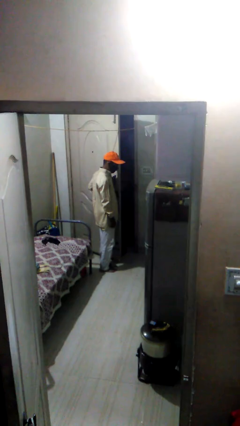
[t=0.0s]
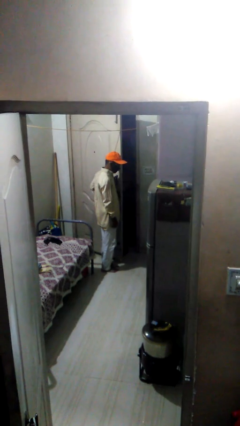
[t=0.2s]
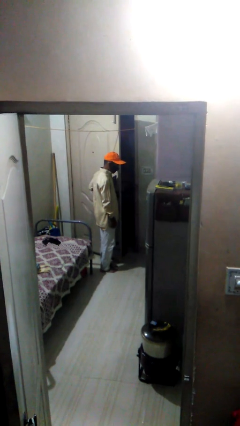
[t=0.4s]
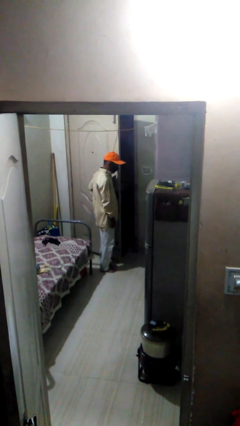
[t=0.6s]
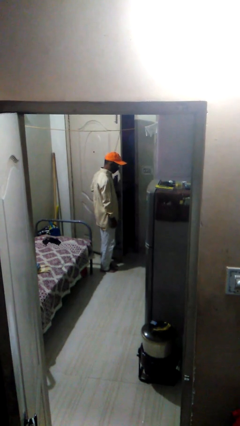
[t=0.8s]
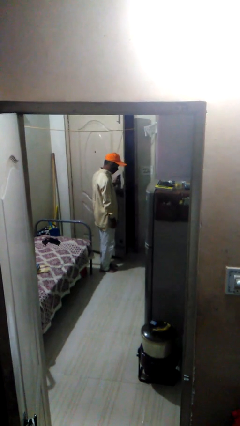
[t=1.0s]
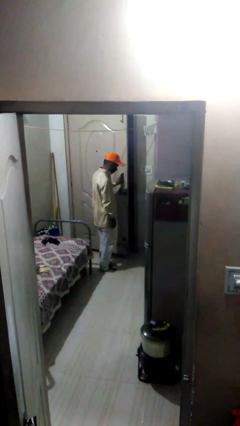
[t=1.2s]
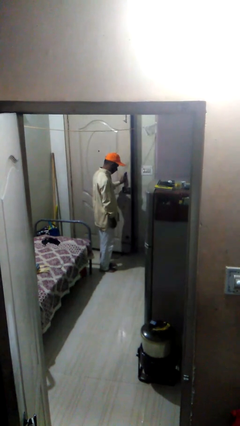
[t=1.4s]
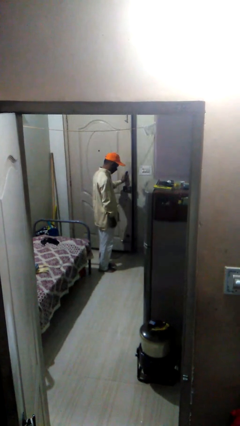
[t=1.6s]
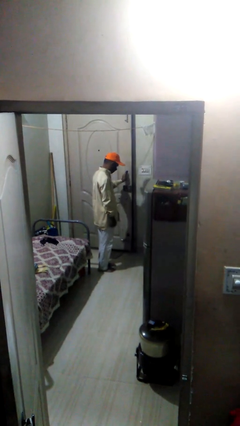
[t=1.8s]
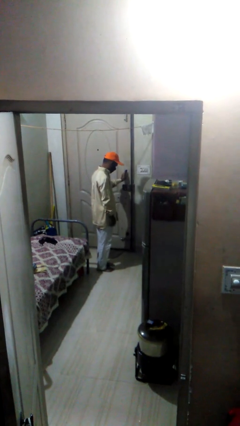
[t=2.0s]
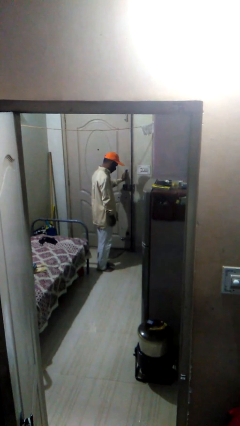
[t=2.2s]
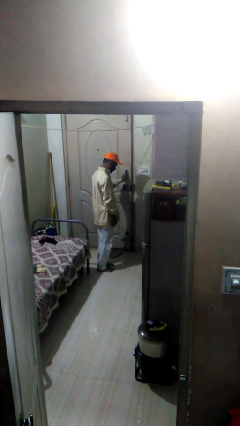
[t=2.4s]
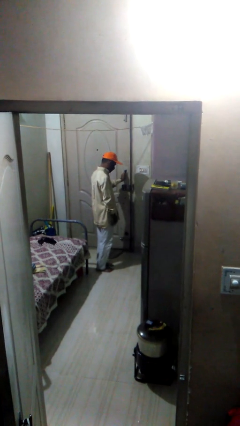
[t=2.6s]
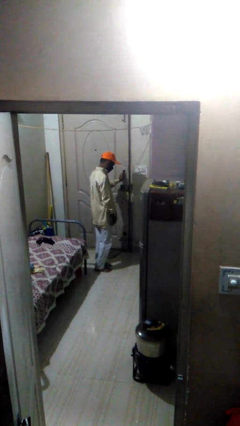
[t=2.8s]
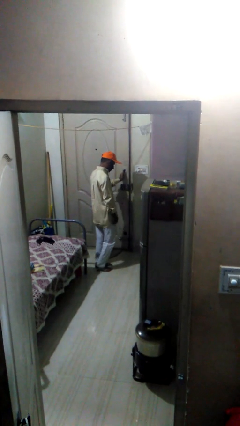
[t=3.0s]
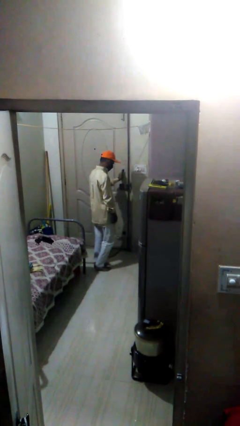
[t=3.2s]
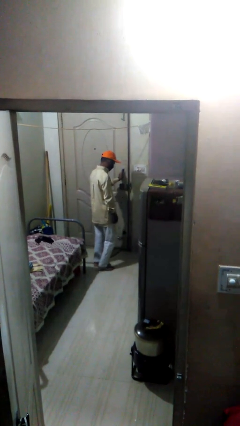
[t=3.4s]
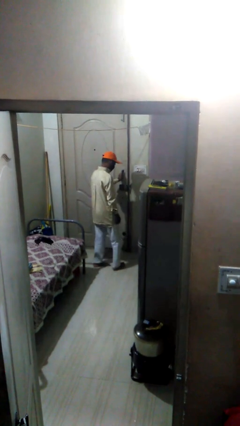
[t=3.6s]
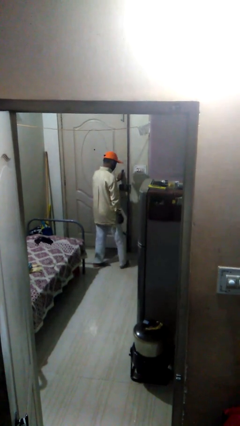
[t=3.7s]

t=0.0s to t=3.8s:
person closes facility door

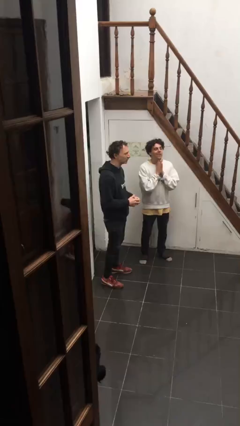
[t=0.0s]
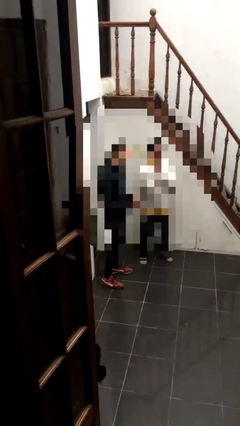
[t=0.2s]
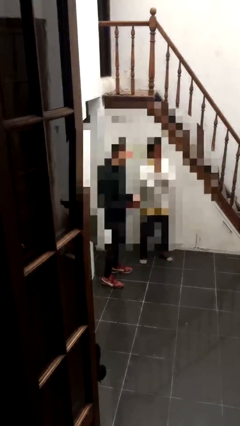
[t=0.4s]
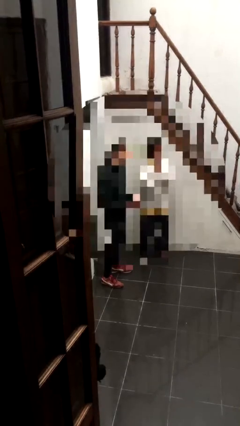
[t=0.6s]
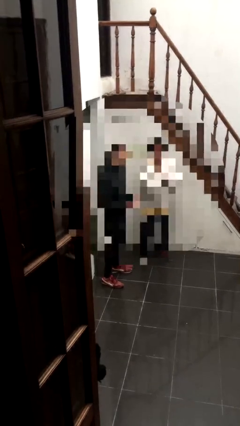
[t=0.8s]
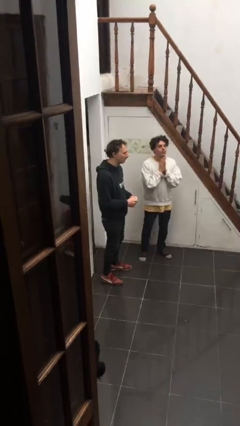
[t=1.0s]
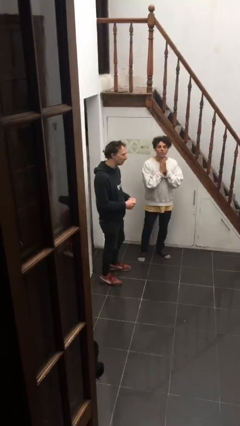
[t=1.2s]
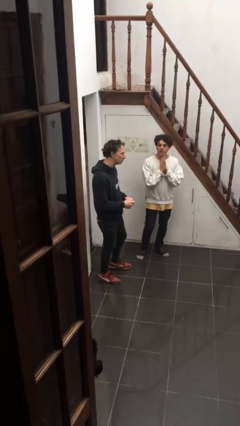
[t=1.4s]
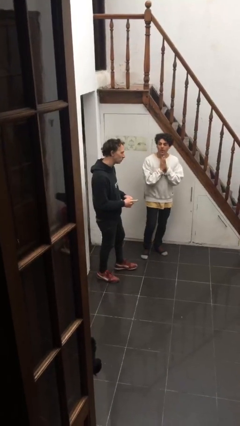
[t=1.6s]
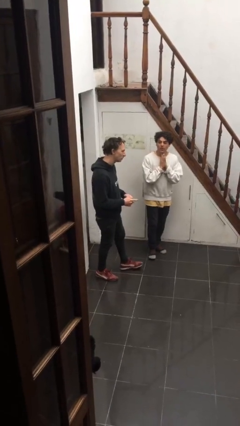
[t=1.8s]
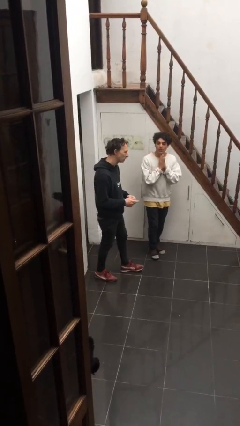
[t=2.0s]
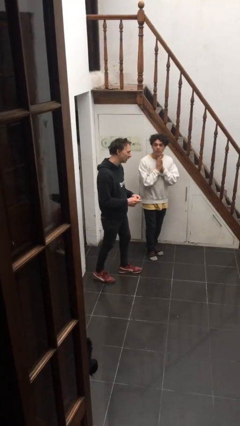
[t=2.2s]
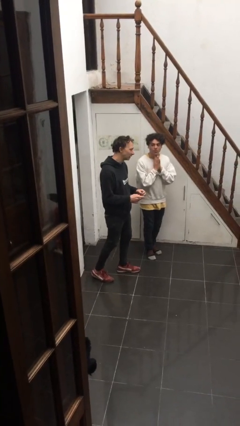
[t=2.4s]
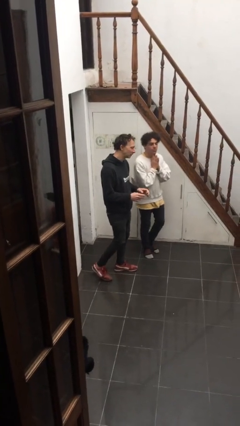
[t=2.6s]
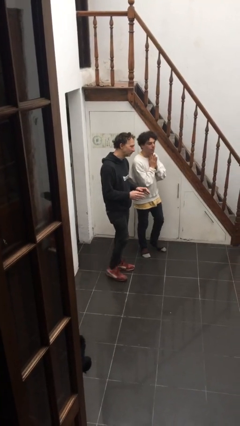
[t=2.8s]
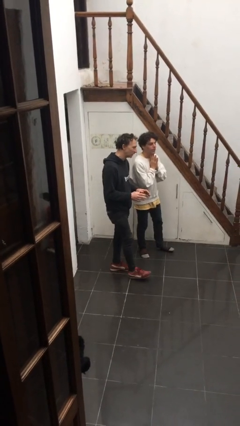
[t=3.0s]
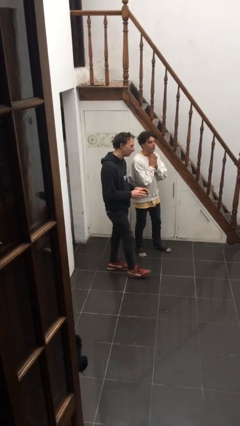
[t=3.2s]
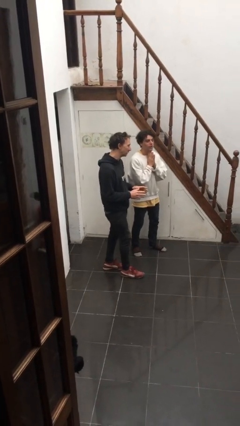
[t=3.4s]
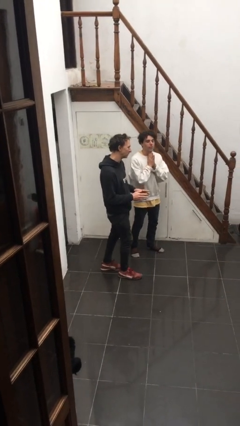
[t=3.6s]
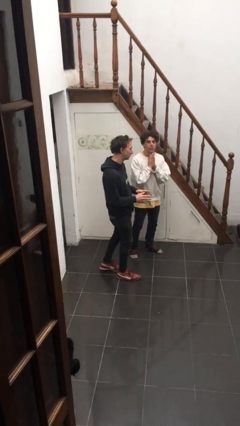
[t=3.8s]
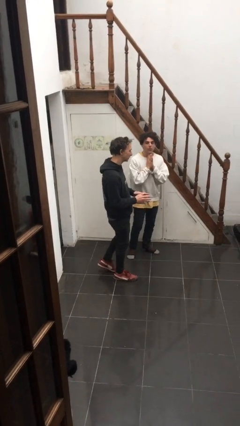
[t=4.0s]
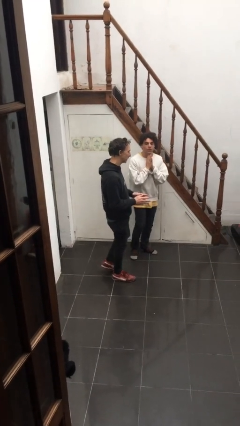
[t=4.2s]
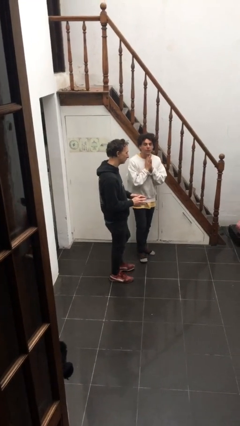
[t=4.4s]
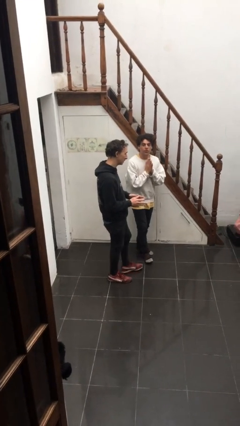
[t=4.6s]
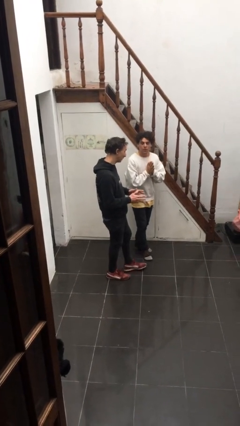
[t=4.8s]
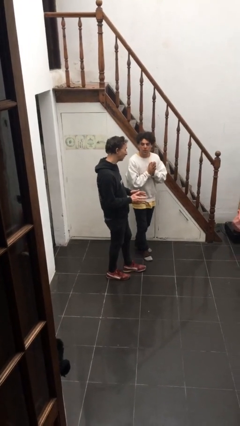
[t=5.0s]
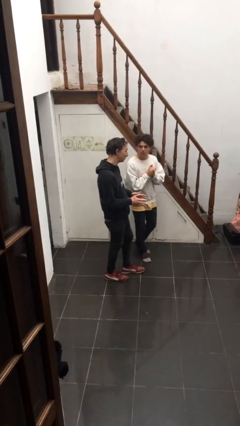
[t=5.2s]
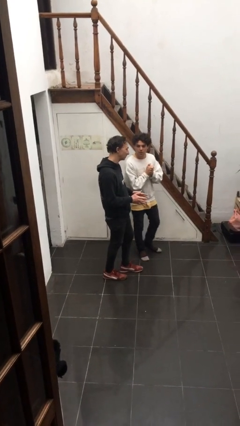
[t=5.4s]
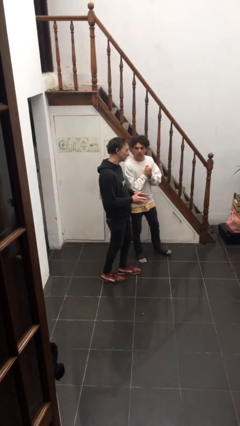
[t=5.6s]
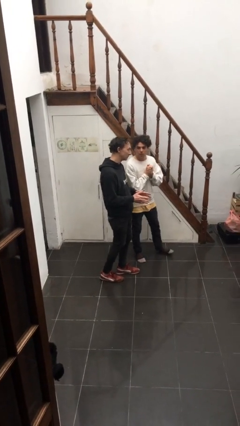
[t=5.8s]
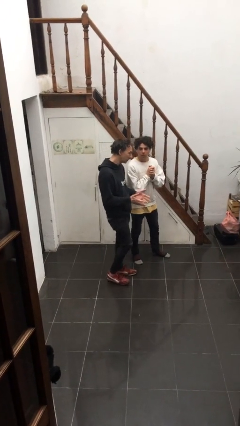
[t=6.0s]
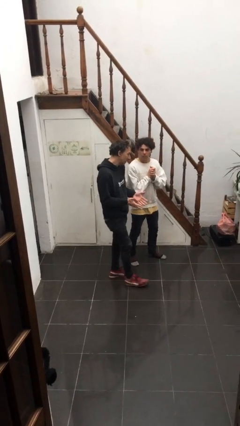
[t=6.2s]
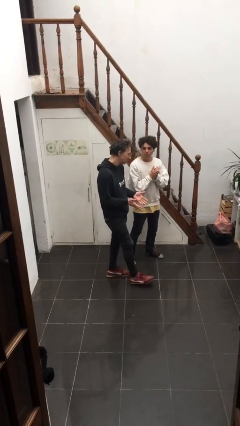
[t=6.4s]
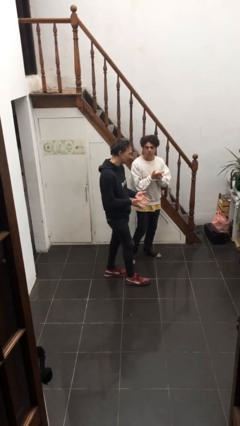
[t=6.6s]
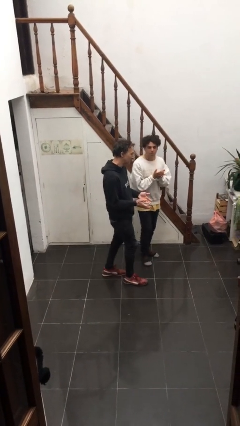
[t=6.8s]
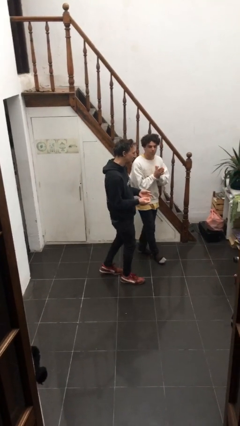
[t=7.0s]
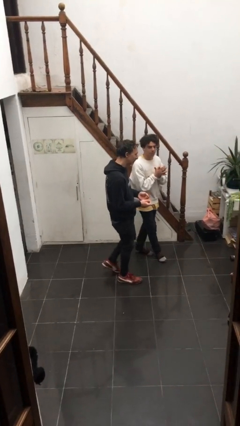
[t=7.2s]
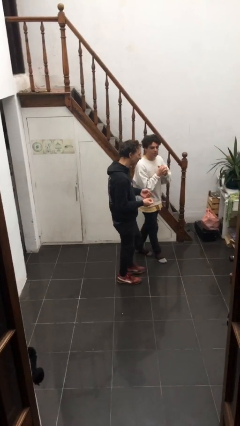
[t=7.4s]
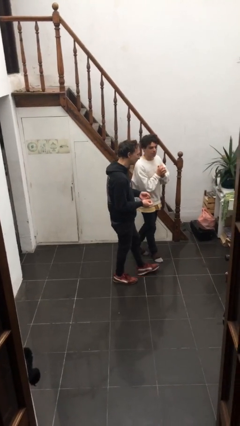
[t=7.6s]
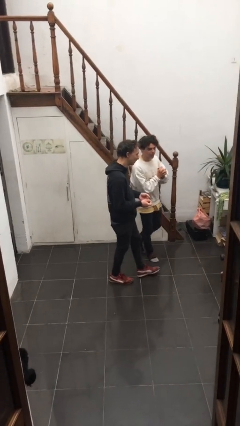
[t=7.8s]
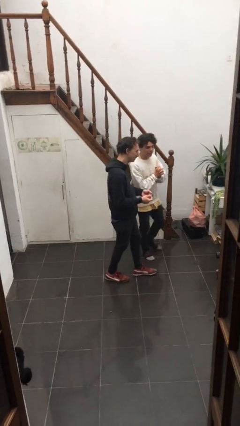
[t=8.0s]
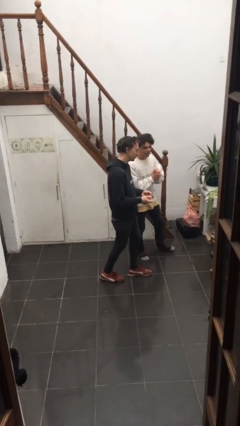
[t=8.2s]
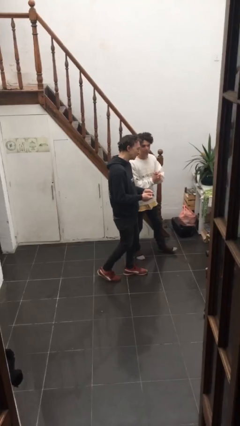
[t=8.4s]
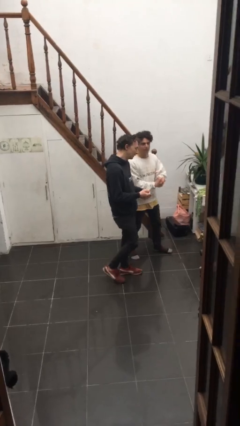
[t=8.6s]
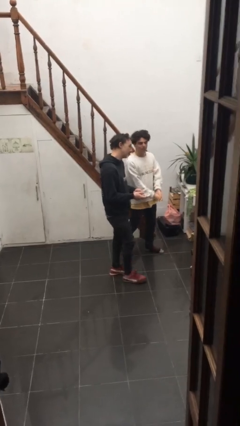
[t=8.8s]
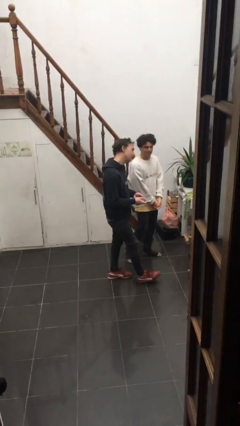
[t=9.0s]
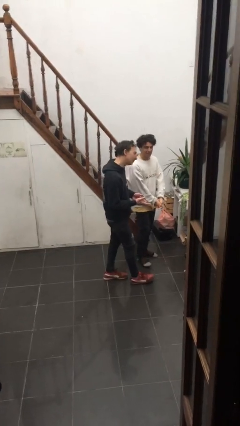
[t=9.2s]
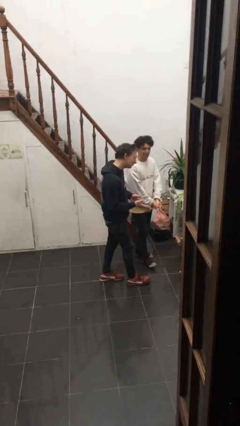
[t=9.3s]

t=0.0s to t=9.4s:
person talks to person

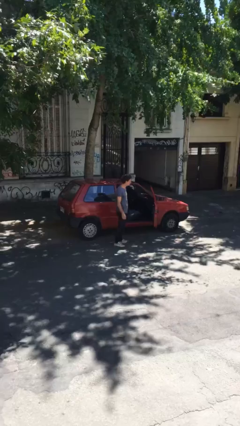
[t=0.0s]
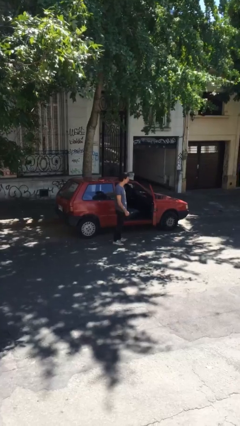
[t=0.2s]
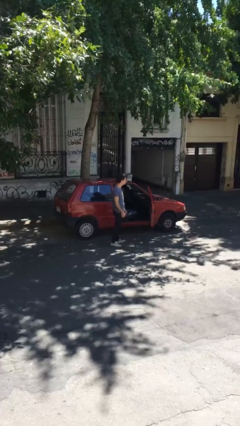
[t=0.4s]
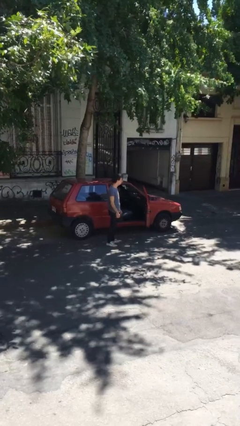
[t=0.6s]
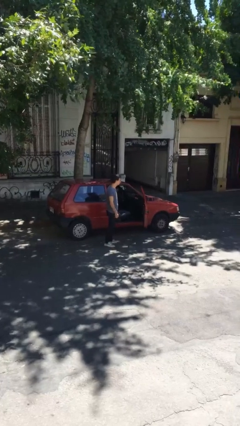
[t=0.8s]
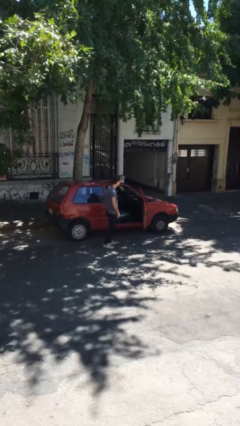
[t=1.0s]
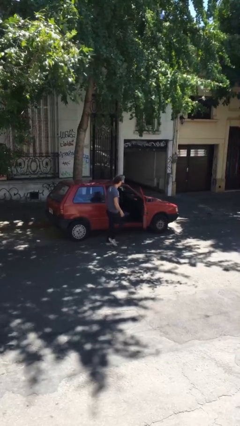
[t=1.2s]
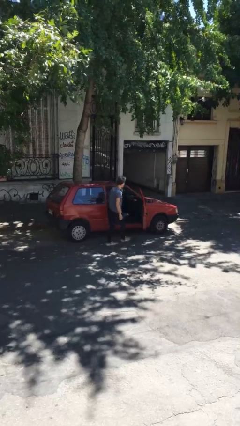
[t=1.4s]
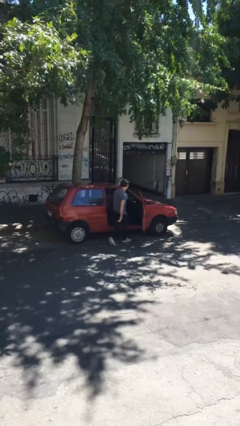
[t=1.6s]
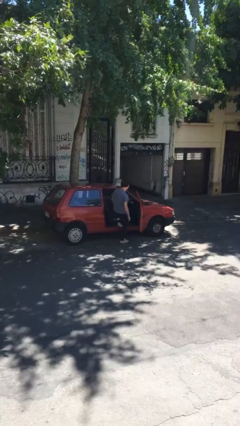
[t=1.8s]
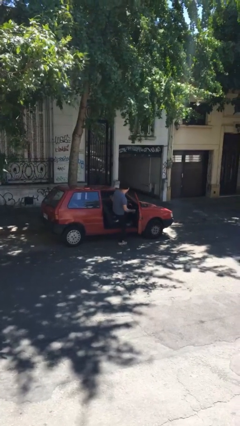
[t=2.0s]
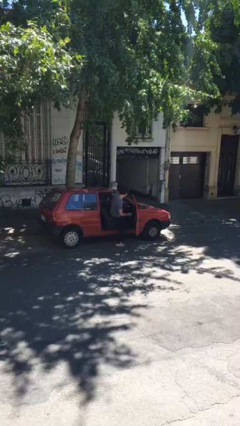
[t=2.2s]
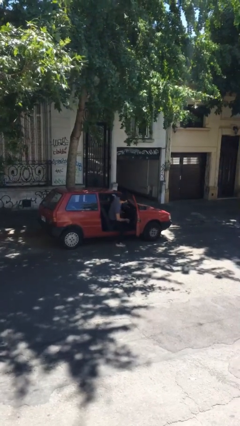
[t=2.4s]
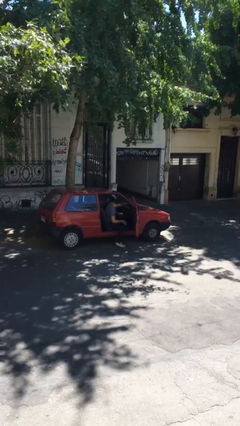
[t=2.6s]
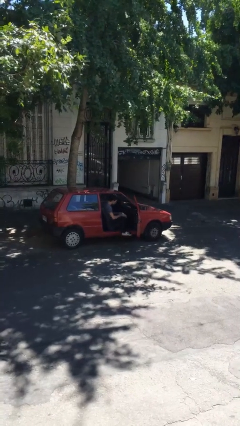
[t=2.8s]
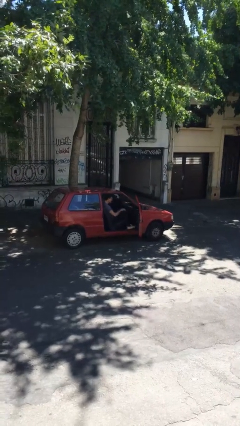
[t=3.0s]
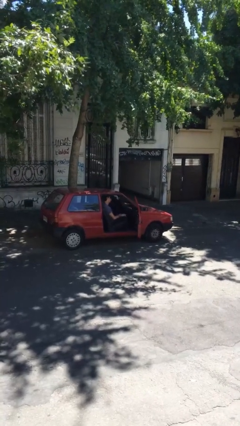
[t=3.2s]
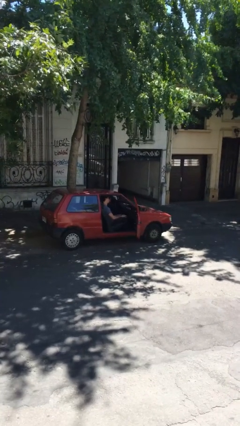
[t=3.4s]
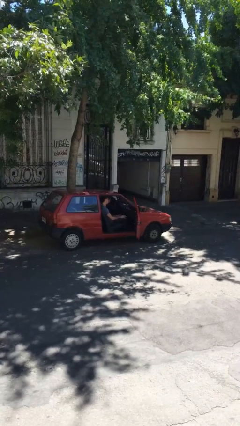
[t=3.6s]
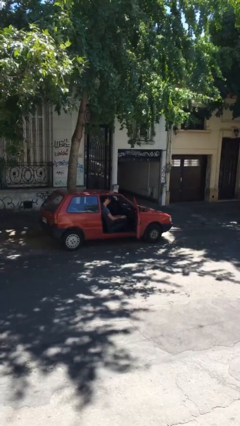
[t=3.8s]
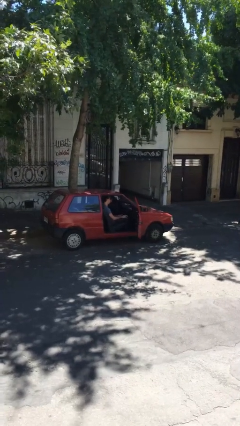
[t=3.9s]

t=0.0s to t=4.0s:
person enters car

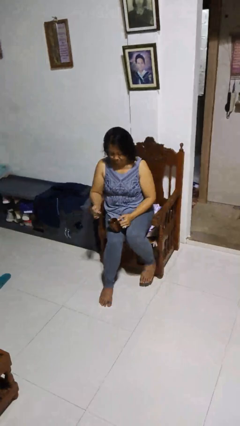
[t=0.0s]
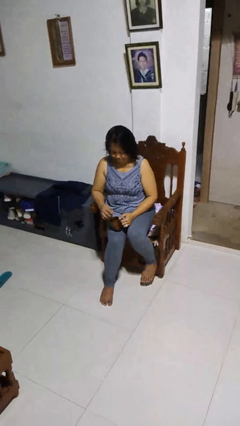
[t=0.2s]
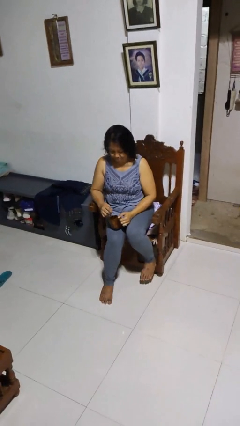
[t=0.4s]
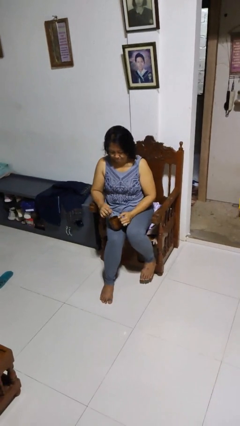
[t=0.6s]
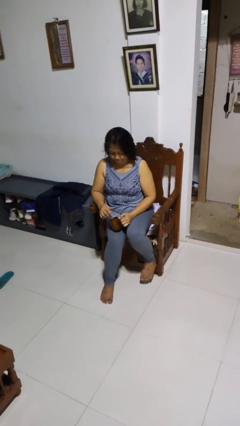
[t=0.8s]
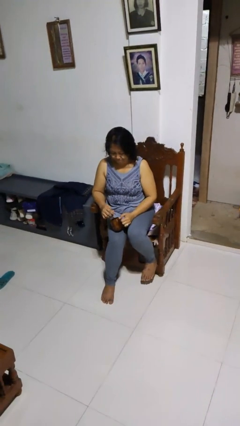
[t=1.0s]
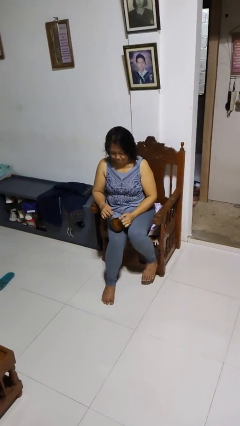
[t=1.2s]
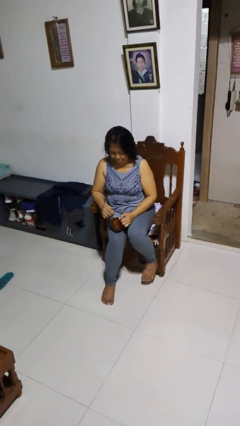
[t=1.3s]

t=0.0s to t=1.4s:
person stirs mug
